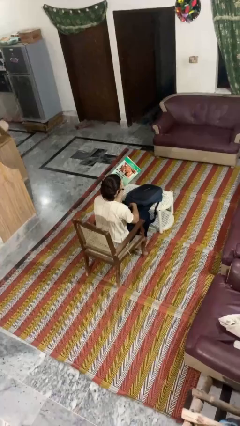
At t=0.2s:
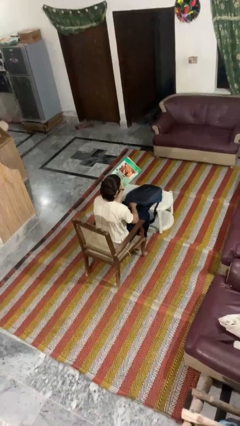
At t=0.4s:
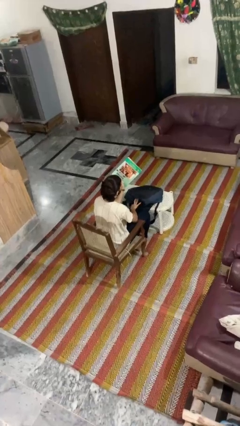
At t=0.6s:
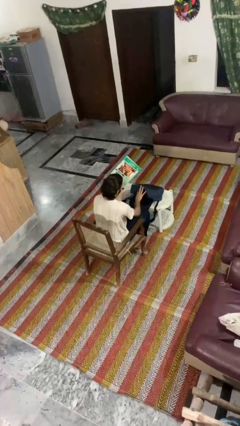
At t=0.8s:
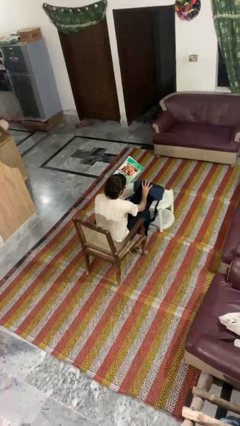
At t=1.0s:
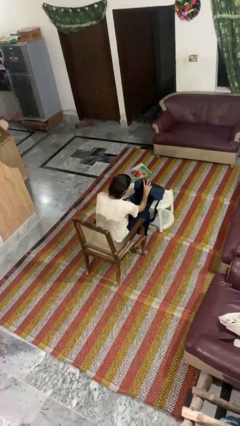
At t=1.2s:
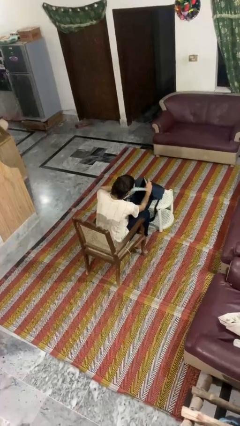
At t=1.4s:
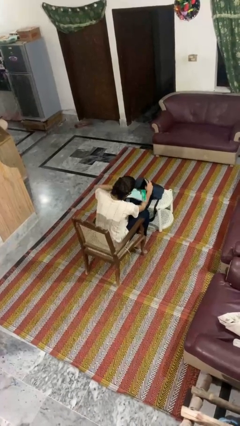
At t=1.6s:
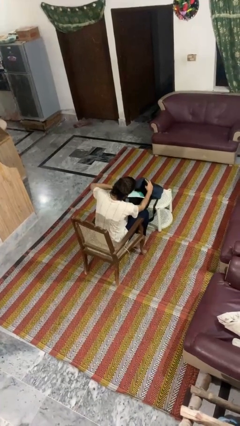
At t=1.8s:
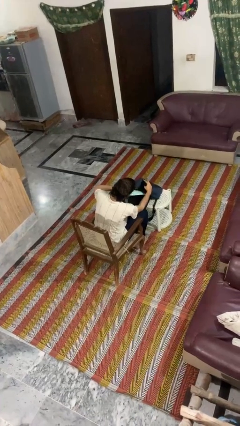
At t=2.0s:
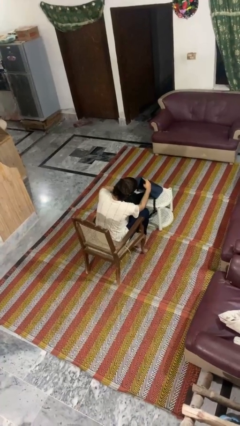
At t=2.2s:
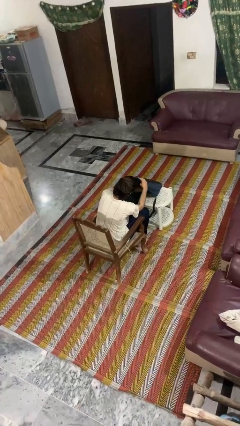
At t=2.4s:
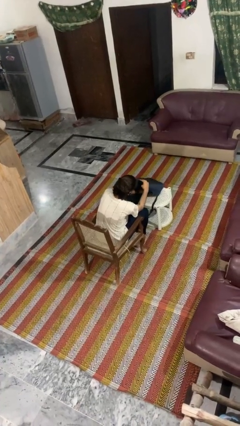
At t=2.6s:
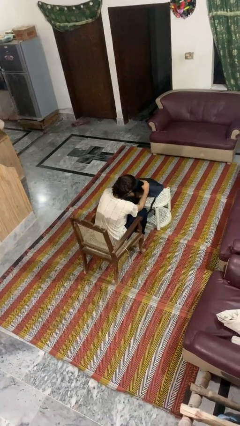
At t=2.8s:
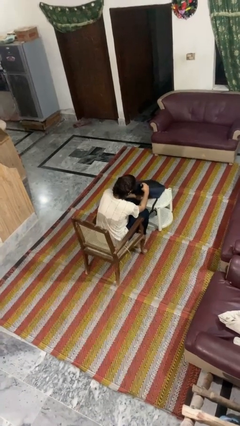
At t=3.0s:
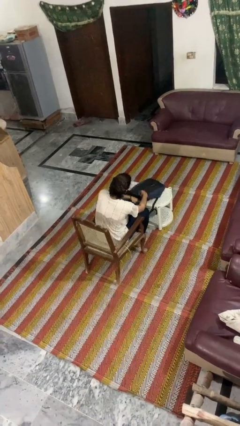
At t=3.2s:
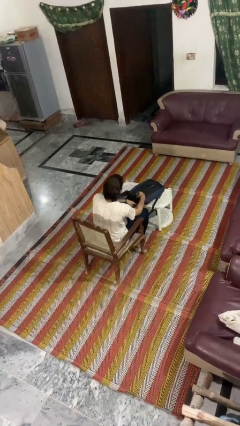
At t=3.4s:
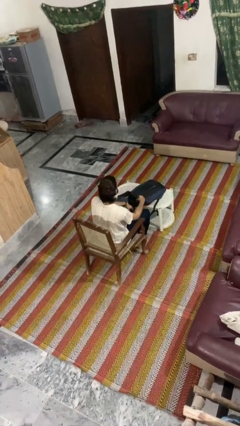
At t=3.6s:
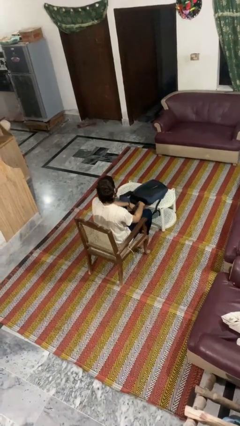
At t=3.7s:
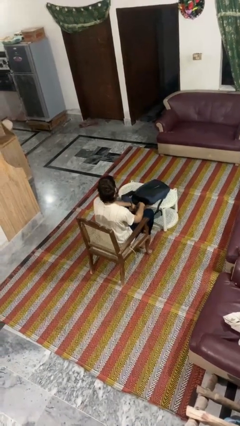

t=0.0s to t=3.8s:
person puts object into backpack

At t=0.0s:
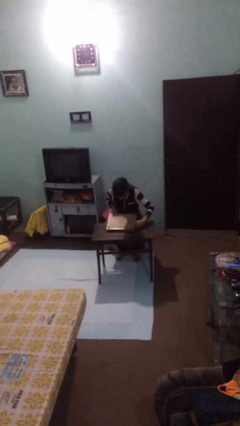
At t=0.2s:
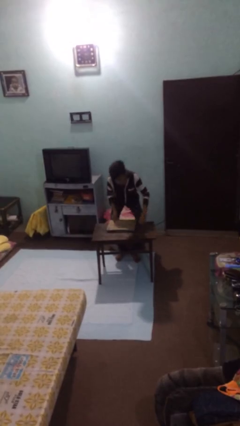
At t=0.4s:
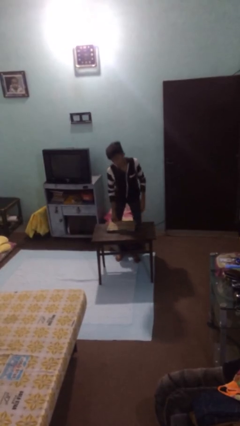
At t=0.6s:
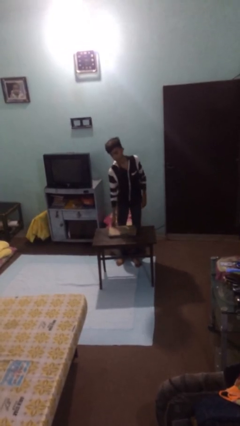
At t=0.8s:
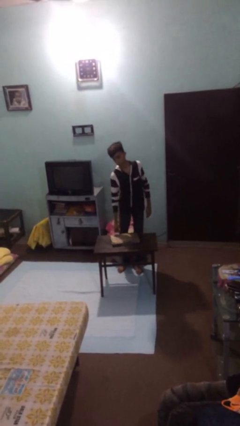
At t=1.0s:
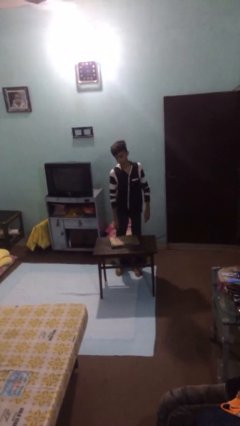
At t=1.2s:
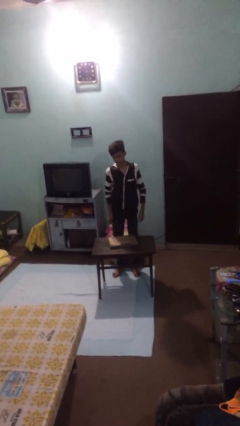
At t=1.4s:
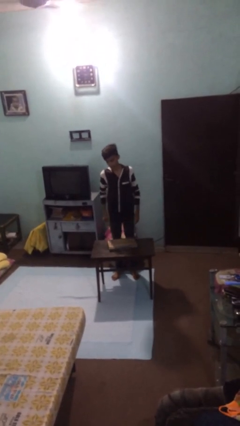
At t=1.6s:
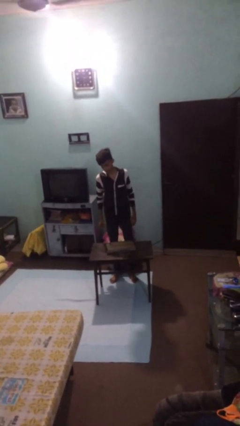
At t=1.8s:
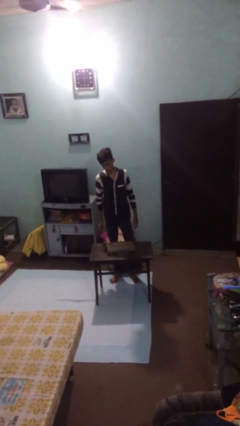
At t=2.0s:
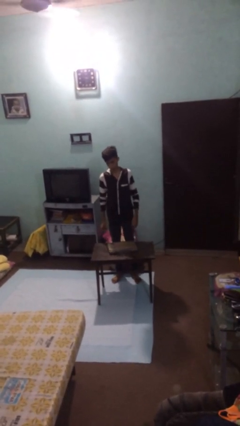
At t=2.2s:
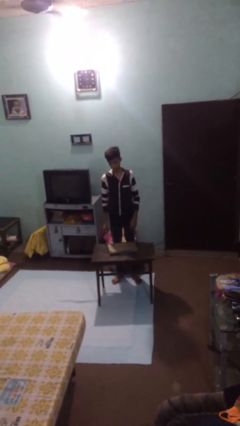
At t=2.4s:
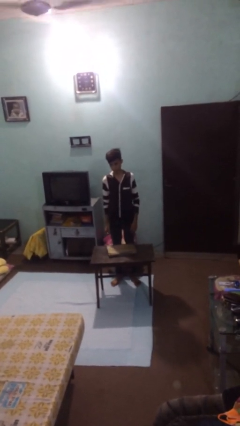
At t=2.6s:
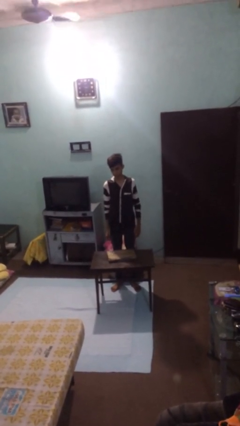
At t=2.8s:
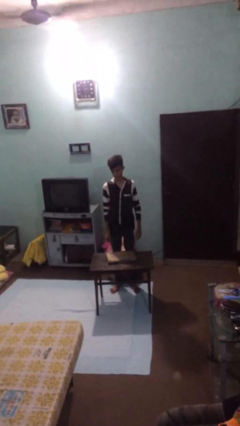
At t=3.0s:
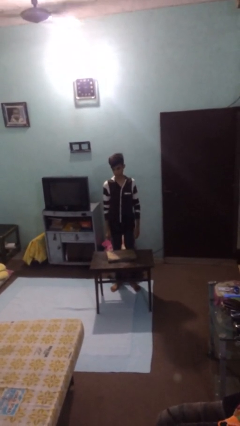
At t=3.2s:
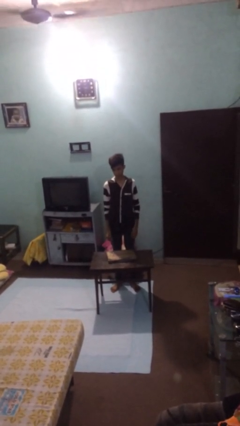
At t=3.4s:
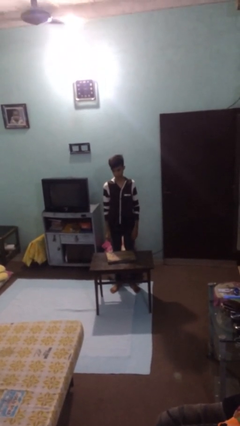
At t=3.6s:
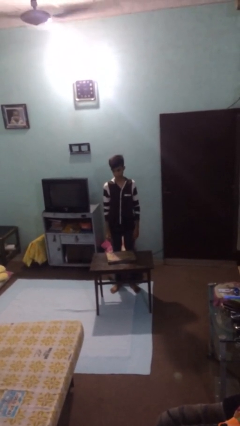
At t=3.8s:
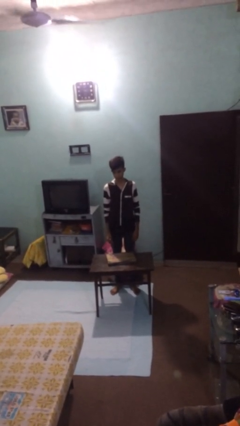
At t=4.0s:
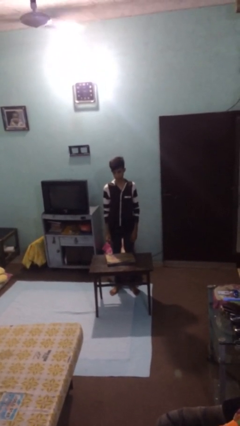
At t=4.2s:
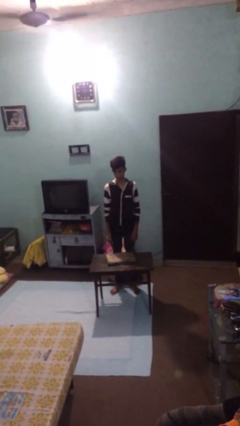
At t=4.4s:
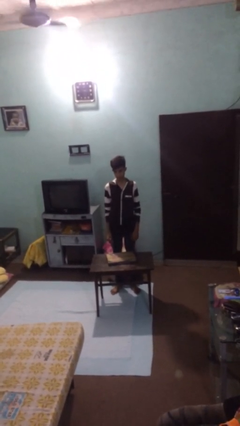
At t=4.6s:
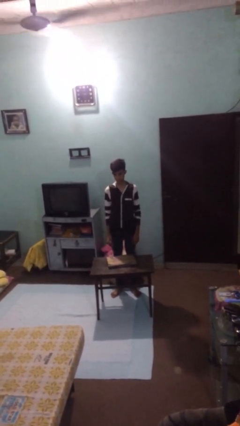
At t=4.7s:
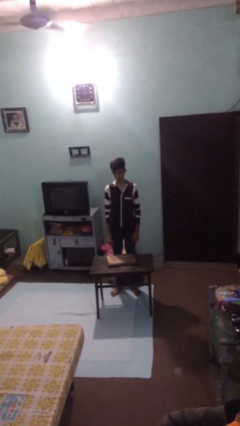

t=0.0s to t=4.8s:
person stands up

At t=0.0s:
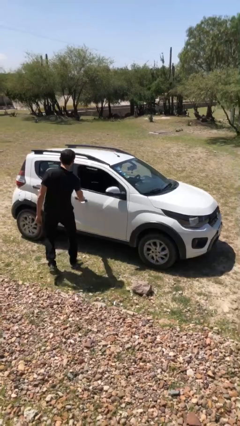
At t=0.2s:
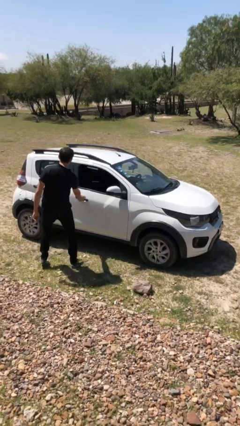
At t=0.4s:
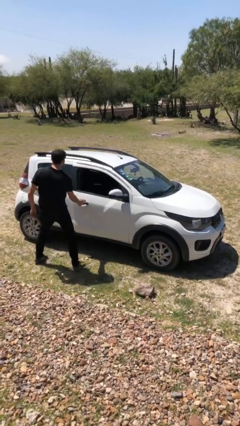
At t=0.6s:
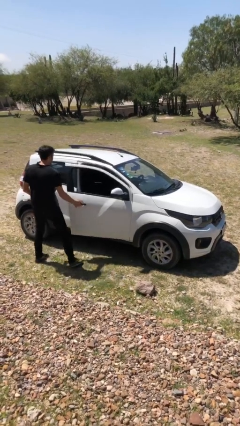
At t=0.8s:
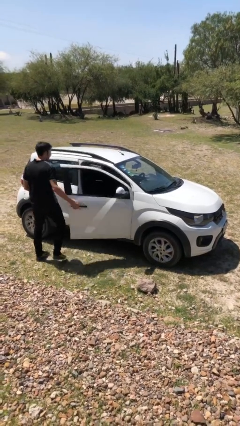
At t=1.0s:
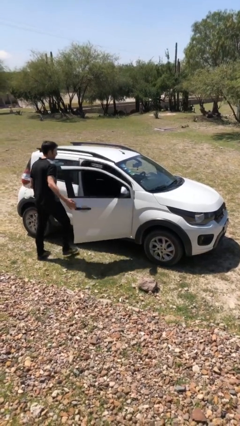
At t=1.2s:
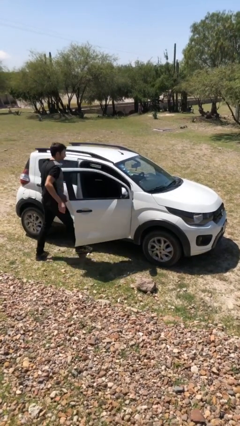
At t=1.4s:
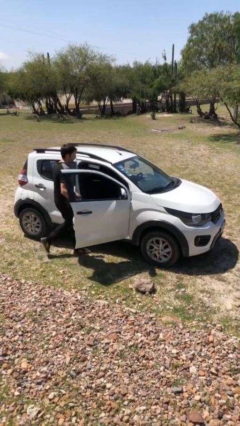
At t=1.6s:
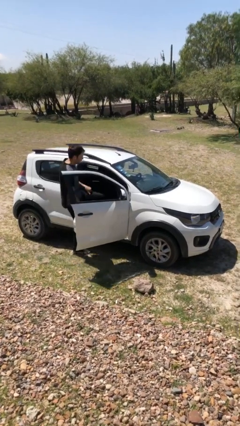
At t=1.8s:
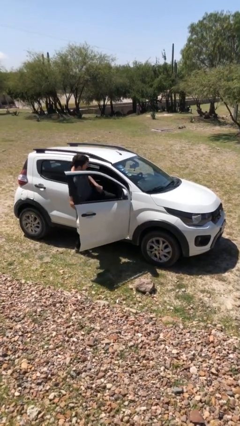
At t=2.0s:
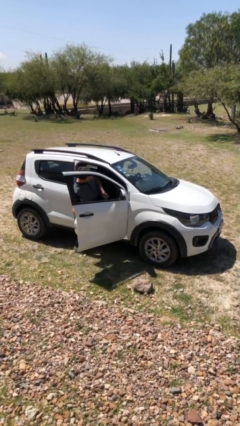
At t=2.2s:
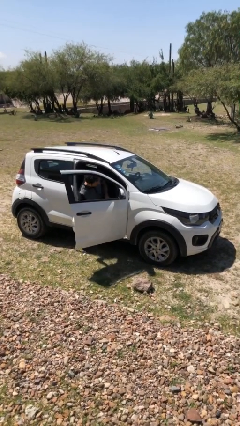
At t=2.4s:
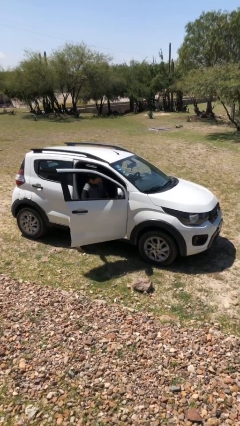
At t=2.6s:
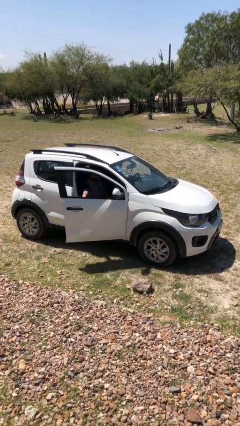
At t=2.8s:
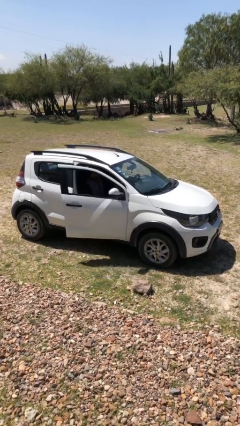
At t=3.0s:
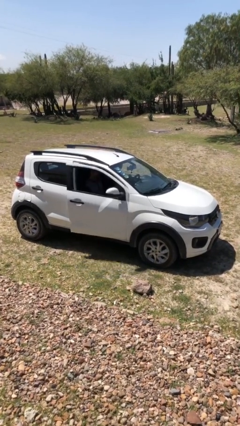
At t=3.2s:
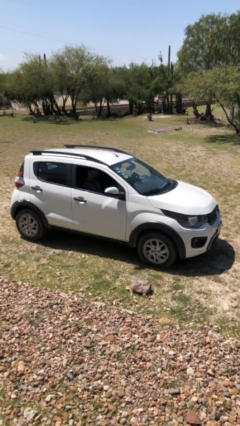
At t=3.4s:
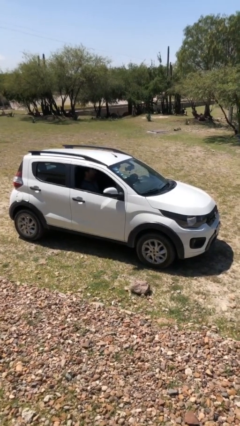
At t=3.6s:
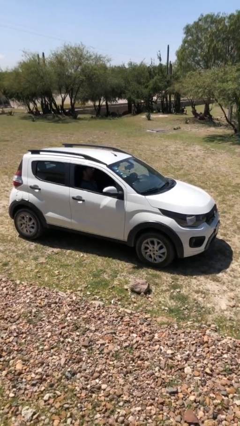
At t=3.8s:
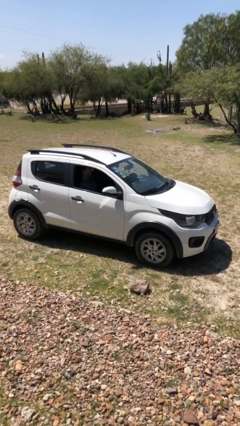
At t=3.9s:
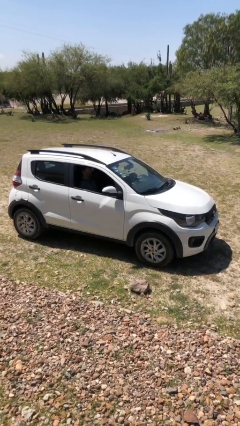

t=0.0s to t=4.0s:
car picks up person

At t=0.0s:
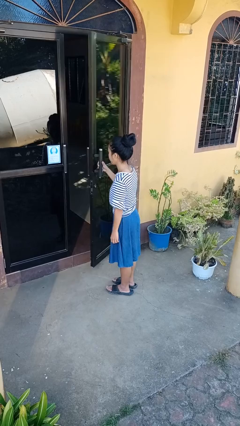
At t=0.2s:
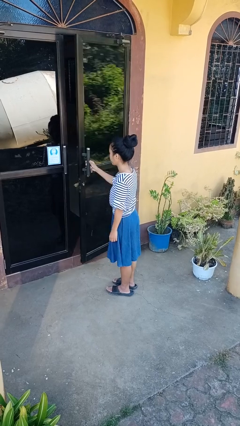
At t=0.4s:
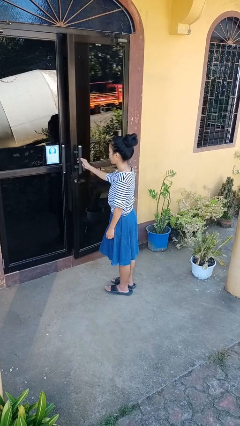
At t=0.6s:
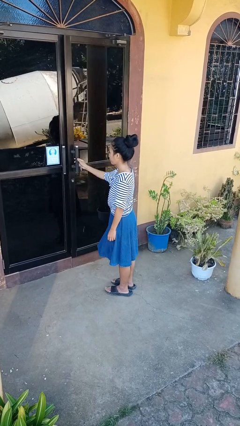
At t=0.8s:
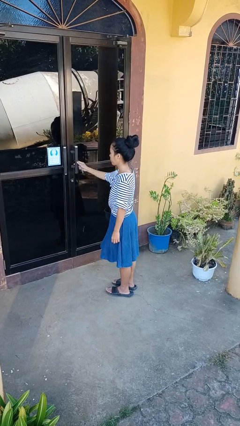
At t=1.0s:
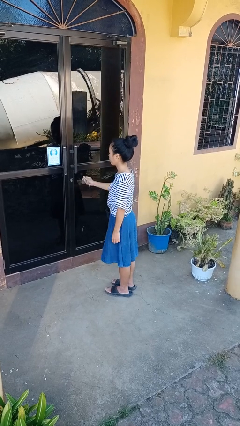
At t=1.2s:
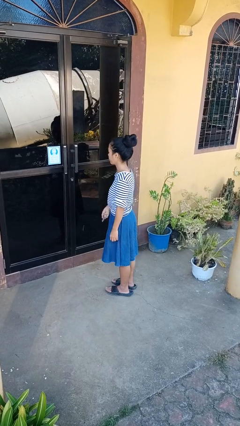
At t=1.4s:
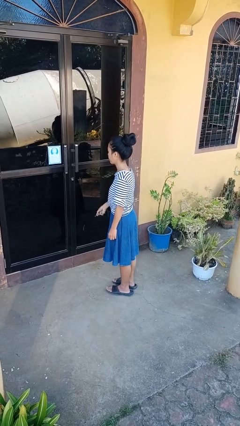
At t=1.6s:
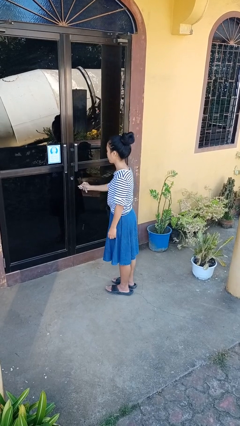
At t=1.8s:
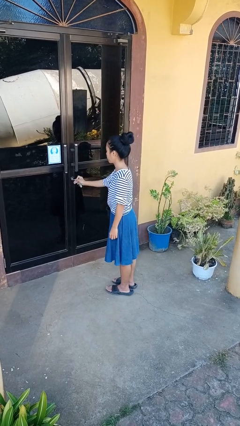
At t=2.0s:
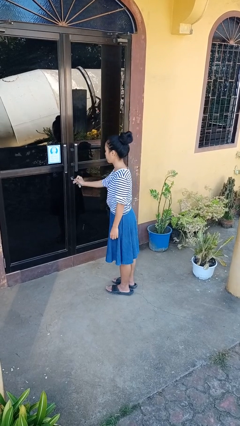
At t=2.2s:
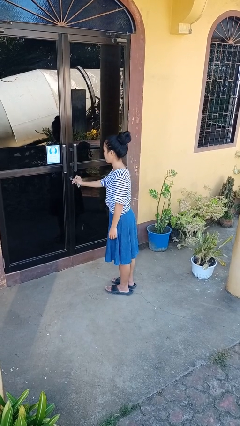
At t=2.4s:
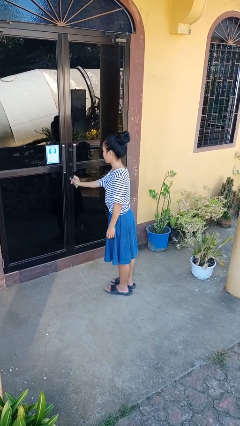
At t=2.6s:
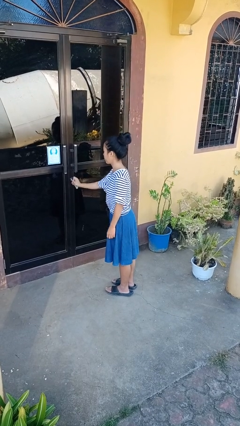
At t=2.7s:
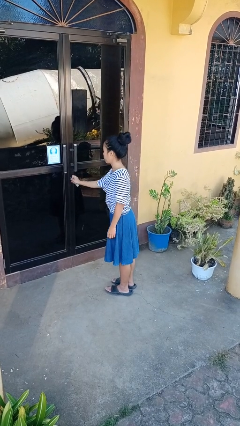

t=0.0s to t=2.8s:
person closes facility door

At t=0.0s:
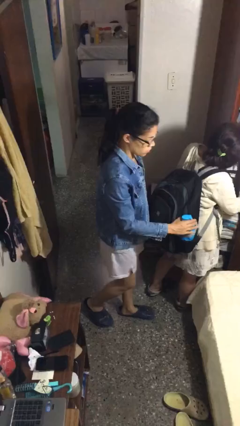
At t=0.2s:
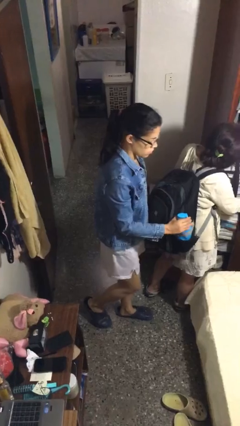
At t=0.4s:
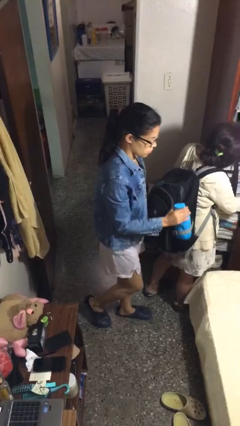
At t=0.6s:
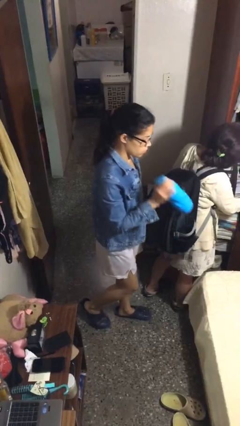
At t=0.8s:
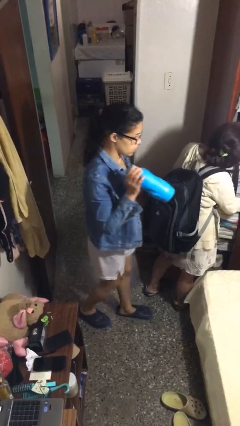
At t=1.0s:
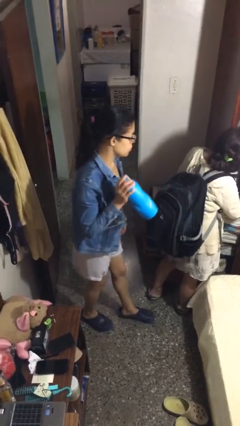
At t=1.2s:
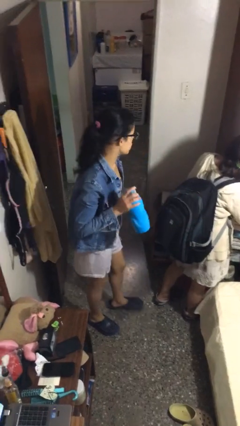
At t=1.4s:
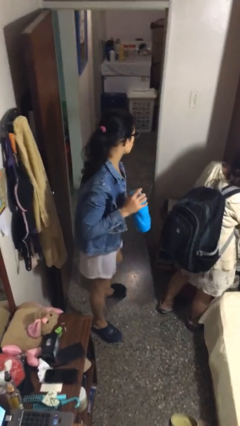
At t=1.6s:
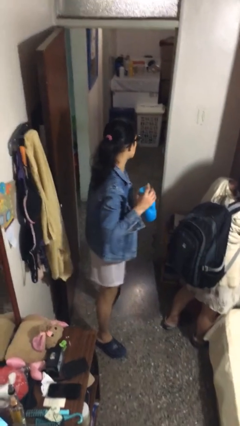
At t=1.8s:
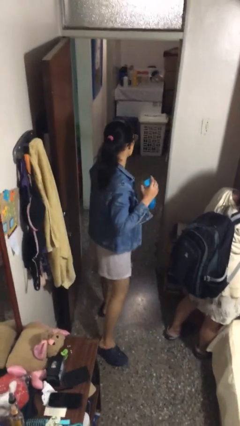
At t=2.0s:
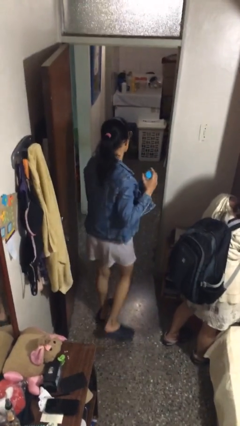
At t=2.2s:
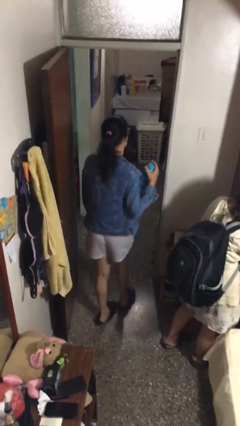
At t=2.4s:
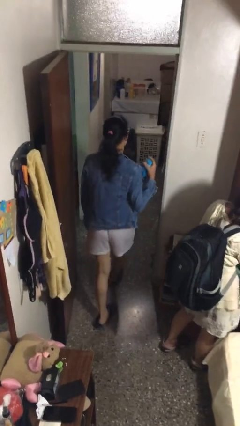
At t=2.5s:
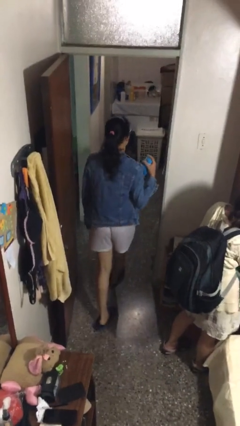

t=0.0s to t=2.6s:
person steals object from person
